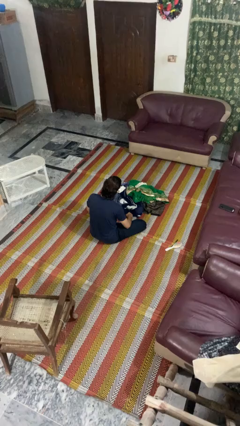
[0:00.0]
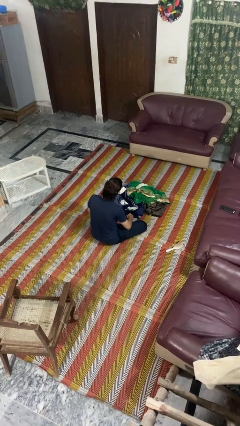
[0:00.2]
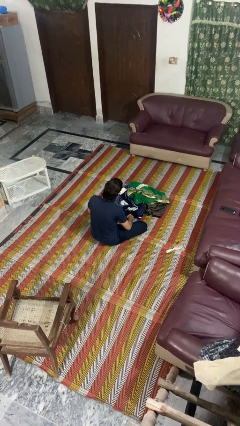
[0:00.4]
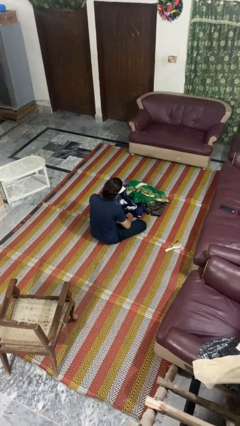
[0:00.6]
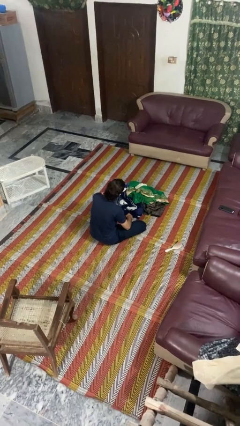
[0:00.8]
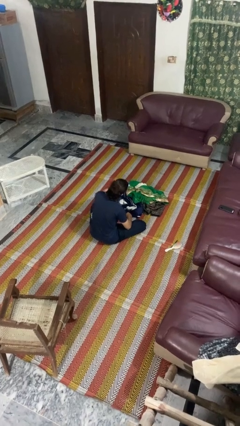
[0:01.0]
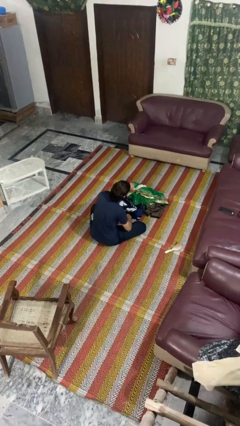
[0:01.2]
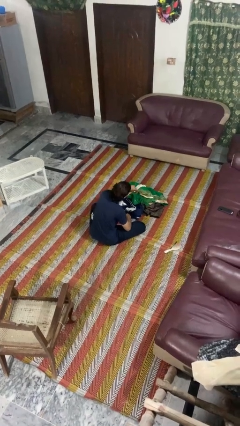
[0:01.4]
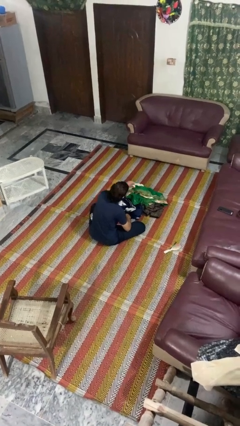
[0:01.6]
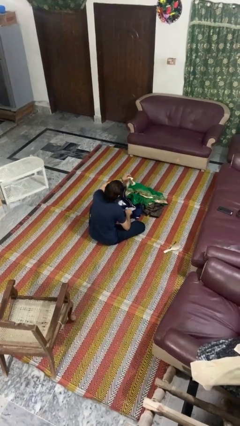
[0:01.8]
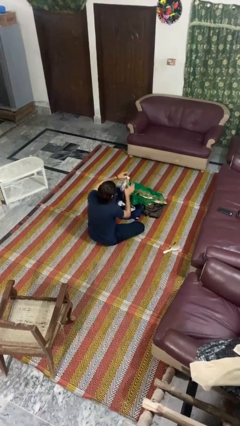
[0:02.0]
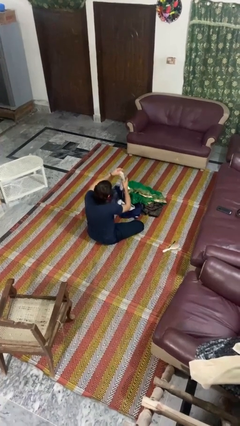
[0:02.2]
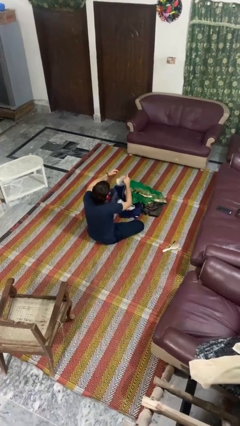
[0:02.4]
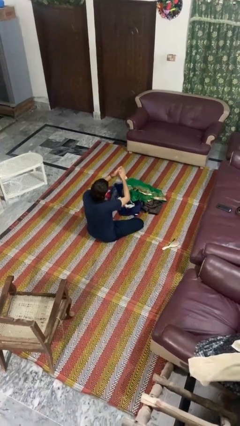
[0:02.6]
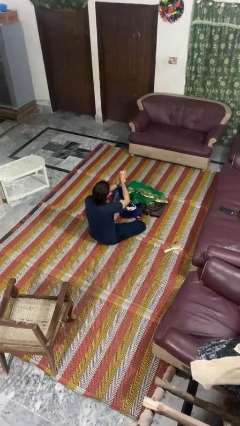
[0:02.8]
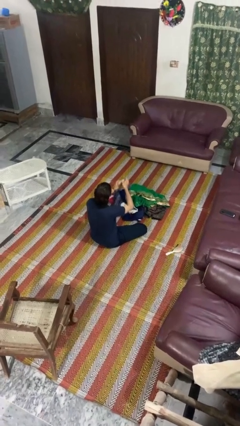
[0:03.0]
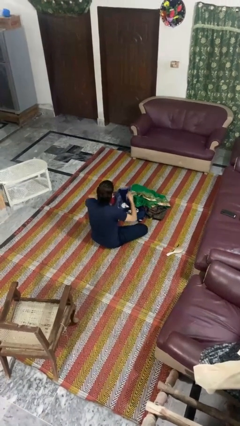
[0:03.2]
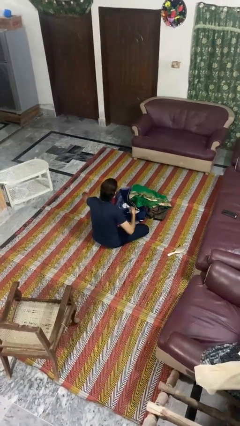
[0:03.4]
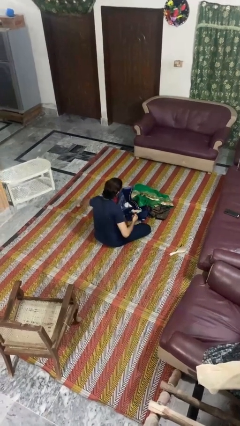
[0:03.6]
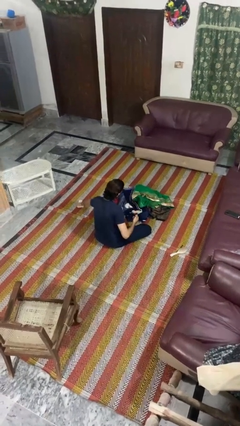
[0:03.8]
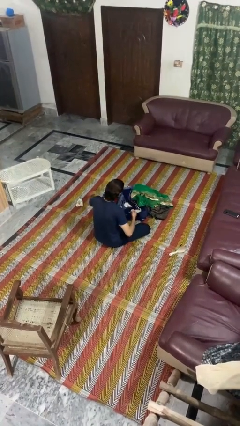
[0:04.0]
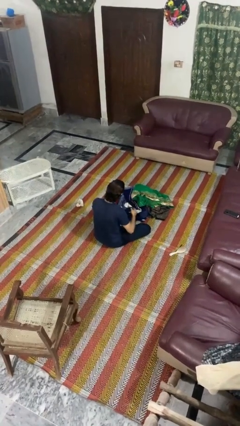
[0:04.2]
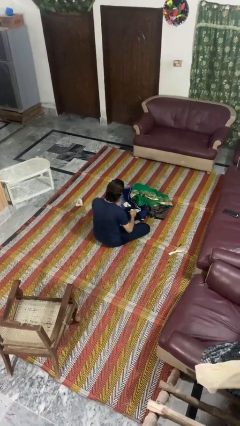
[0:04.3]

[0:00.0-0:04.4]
person folds socks

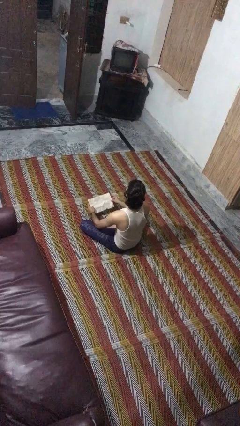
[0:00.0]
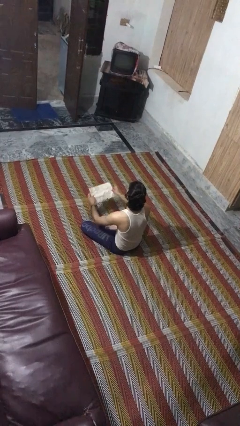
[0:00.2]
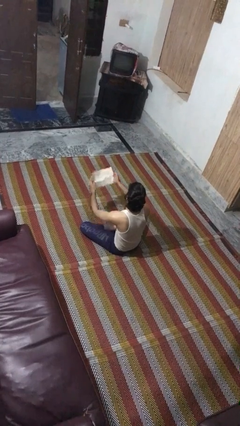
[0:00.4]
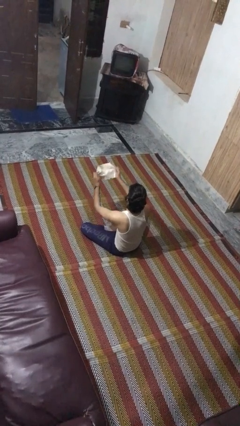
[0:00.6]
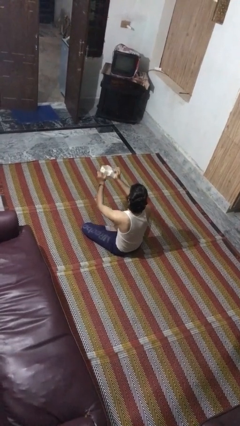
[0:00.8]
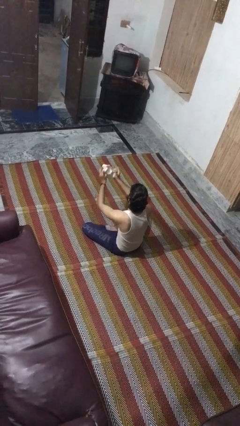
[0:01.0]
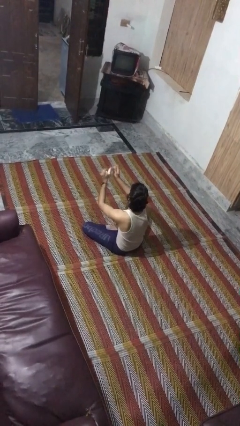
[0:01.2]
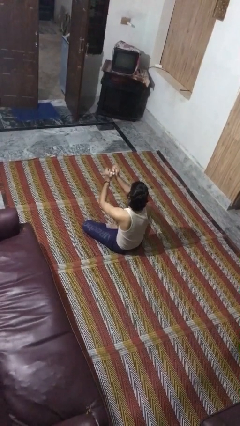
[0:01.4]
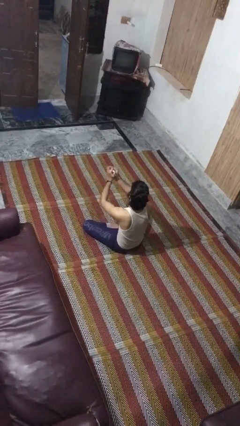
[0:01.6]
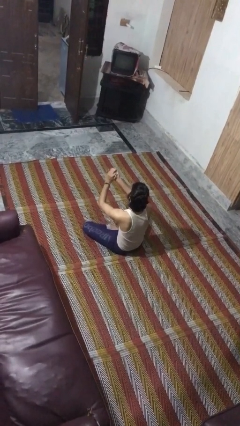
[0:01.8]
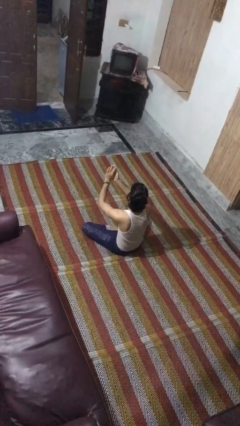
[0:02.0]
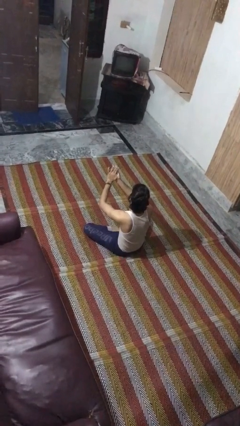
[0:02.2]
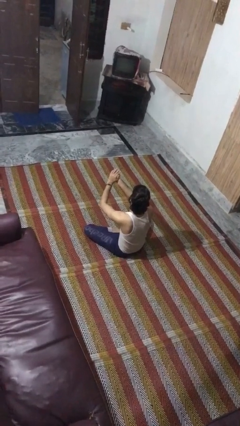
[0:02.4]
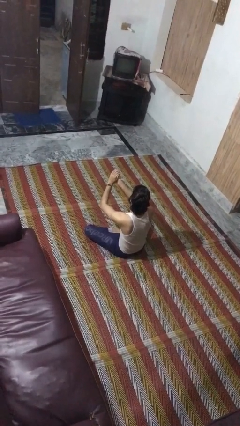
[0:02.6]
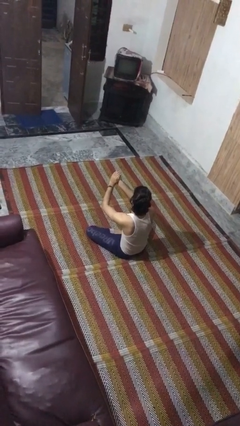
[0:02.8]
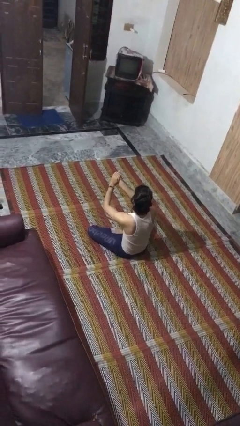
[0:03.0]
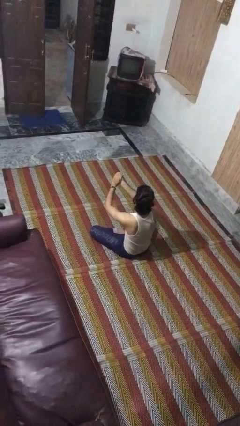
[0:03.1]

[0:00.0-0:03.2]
person crumples paper

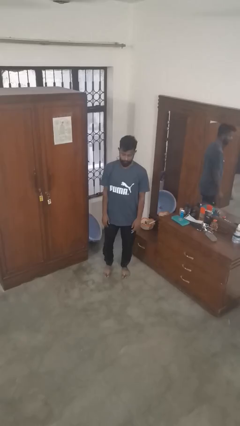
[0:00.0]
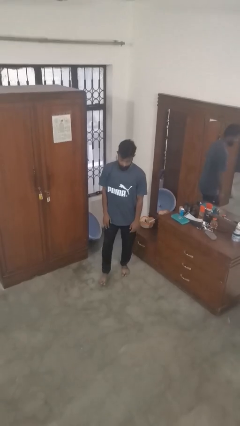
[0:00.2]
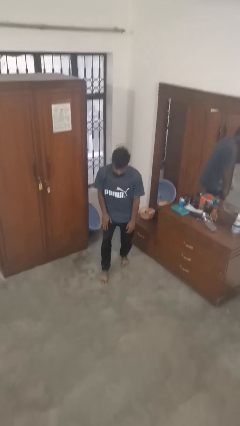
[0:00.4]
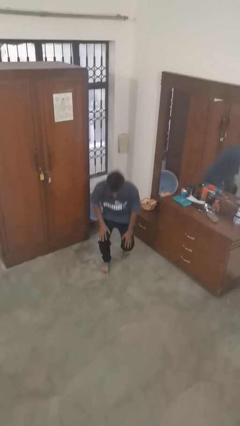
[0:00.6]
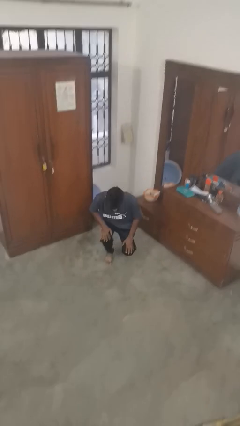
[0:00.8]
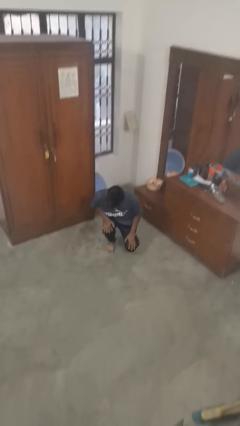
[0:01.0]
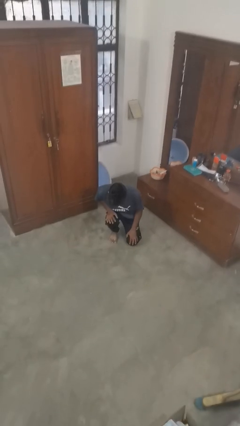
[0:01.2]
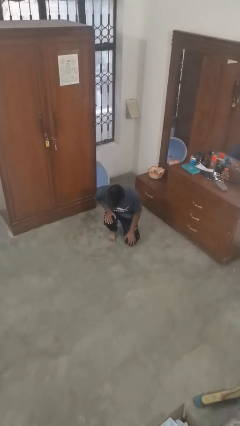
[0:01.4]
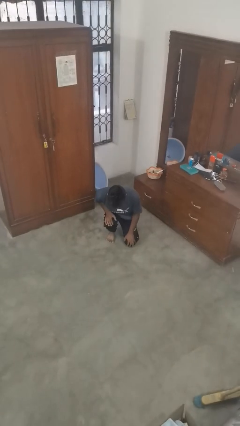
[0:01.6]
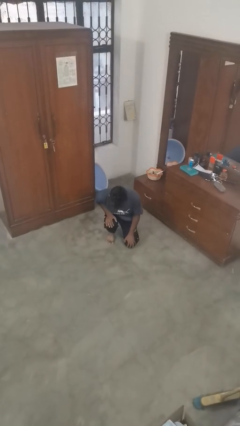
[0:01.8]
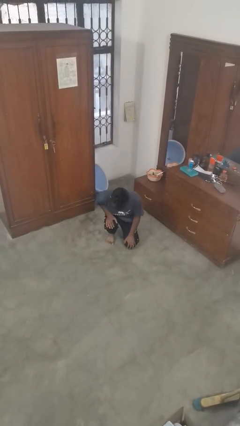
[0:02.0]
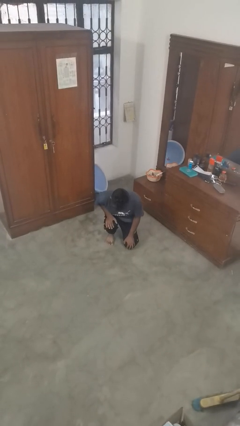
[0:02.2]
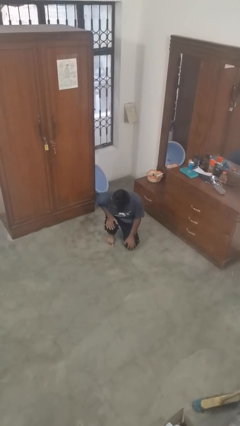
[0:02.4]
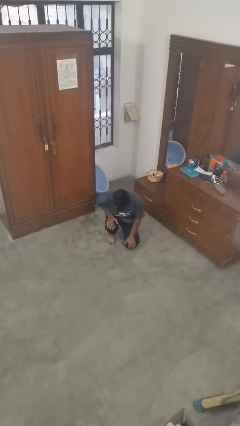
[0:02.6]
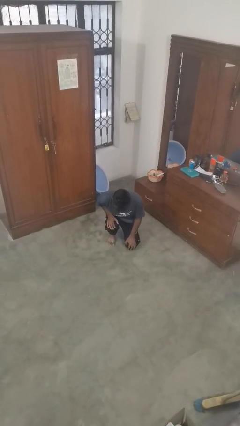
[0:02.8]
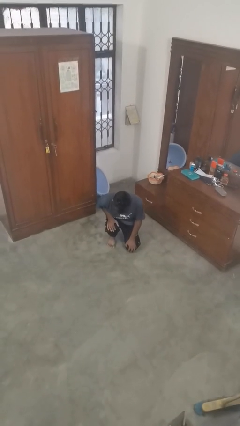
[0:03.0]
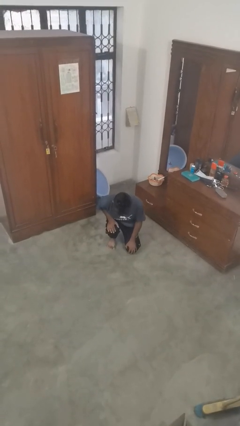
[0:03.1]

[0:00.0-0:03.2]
person kneels

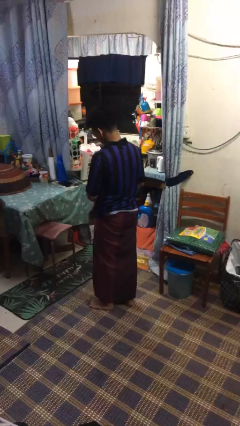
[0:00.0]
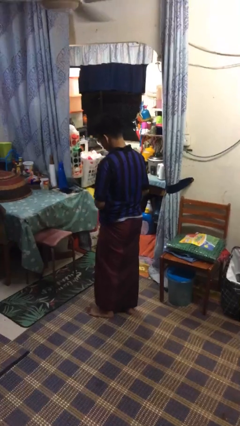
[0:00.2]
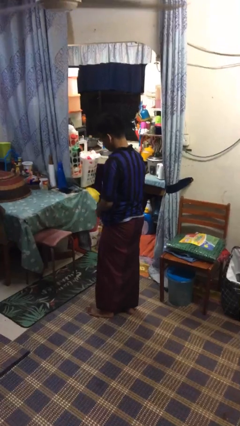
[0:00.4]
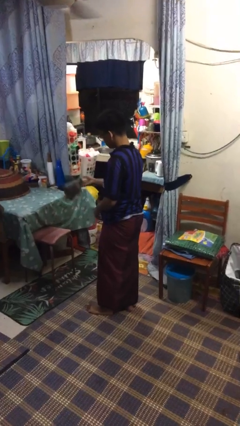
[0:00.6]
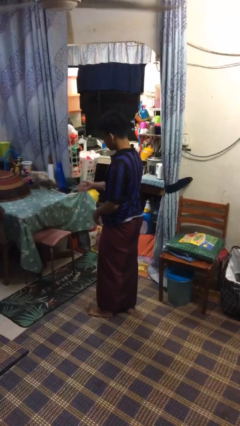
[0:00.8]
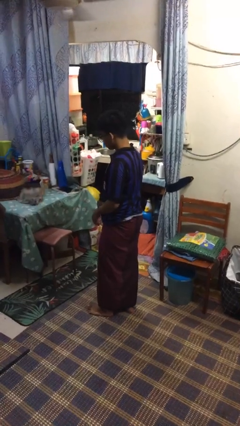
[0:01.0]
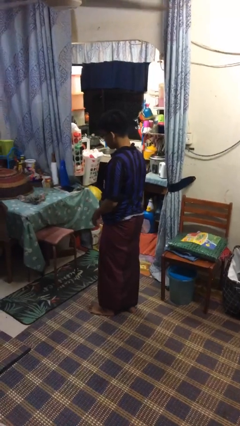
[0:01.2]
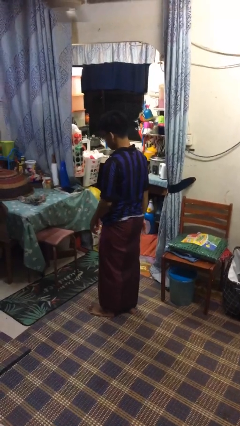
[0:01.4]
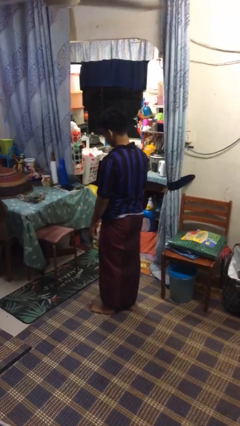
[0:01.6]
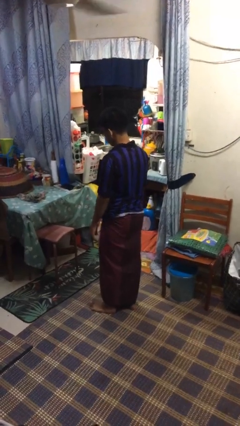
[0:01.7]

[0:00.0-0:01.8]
person throws object on table

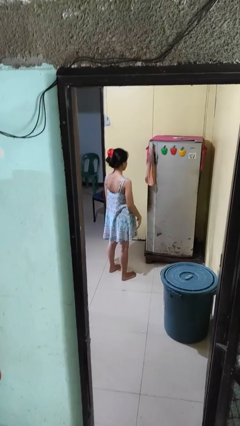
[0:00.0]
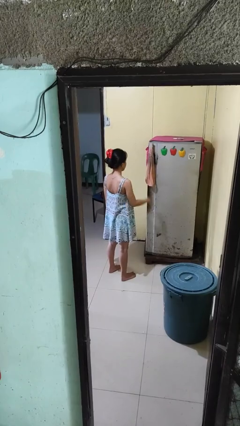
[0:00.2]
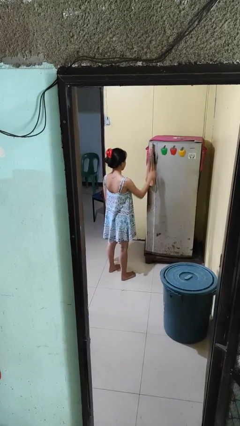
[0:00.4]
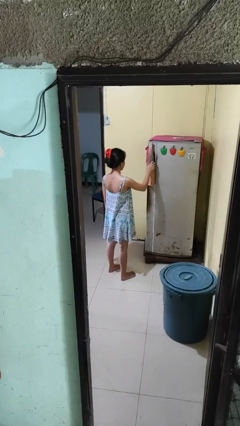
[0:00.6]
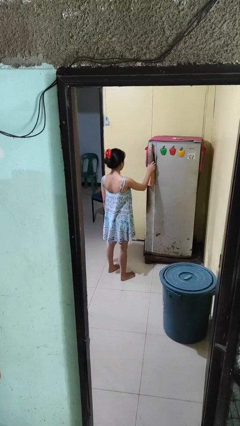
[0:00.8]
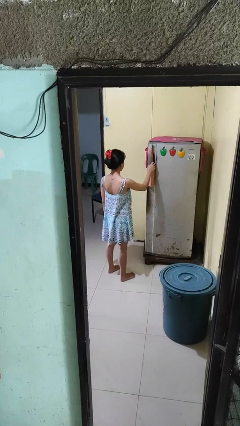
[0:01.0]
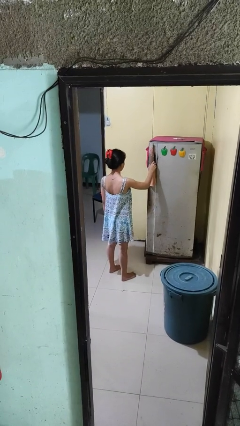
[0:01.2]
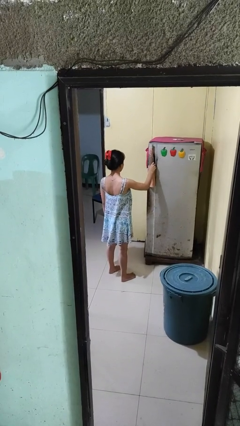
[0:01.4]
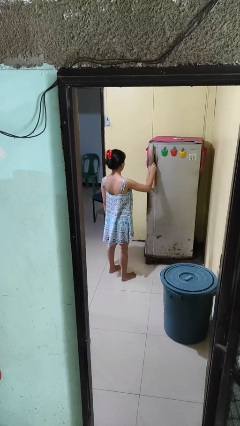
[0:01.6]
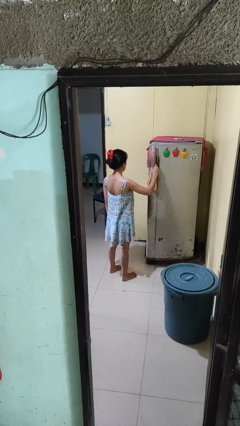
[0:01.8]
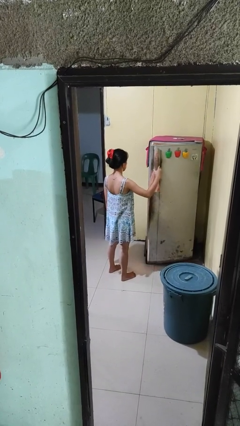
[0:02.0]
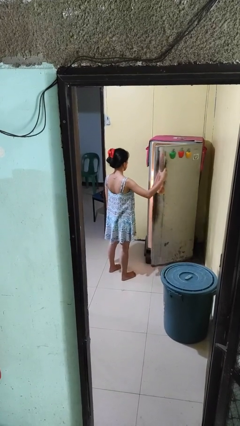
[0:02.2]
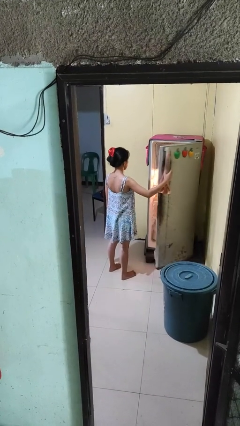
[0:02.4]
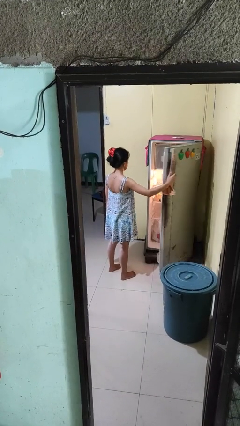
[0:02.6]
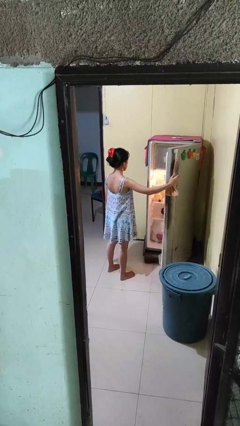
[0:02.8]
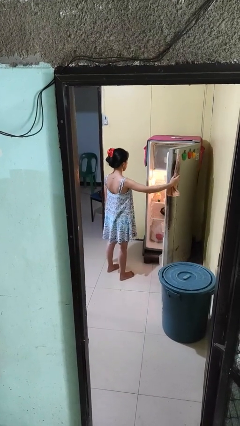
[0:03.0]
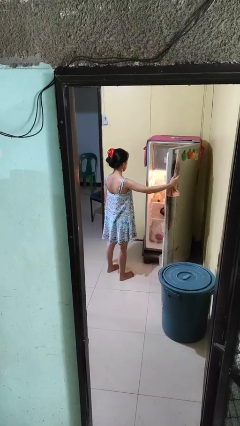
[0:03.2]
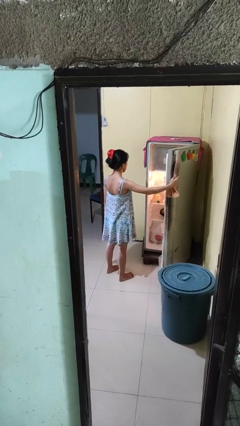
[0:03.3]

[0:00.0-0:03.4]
person opens refrigerator

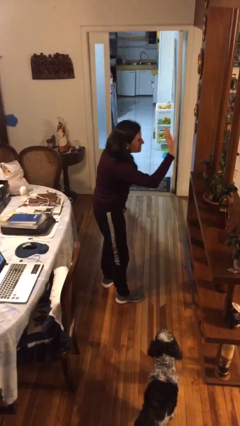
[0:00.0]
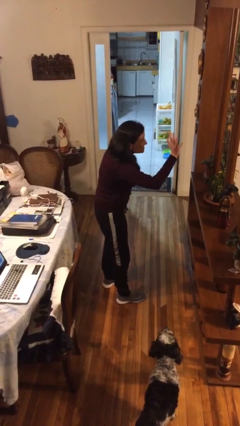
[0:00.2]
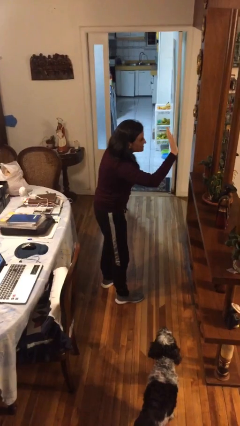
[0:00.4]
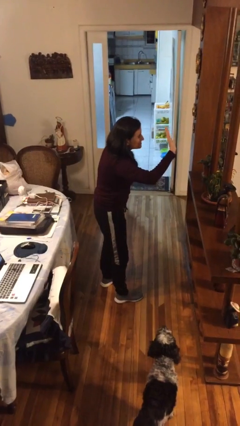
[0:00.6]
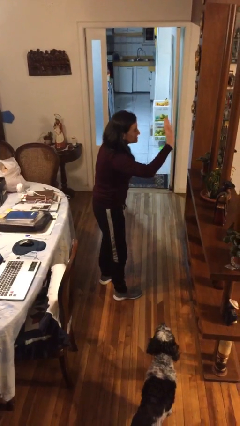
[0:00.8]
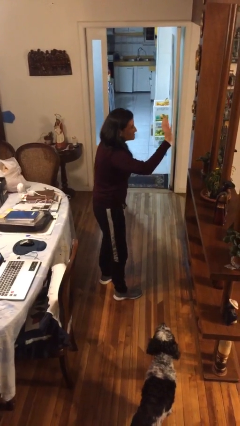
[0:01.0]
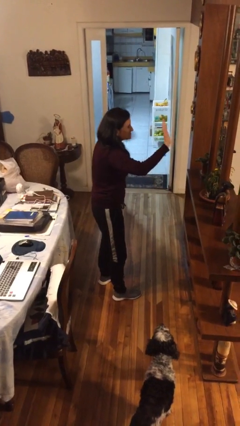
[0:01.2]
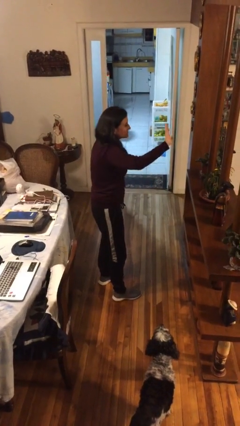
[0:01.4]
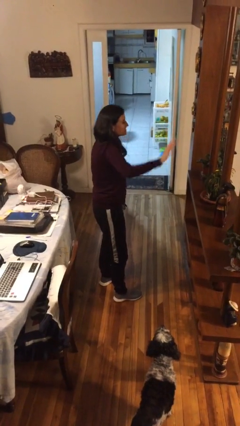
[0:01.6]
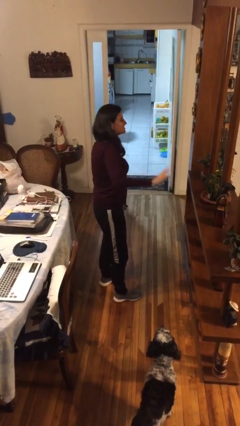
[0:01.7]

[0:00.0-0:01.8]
person waves at person
